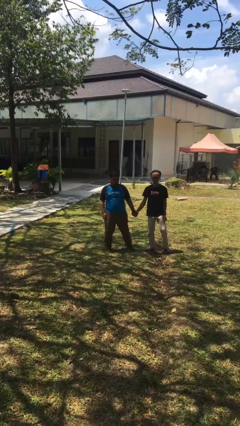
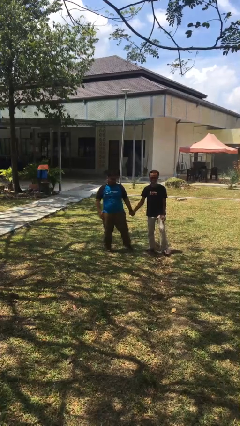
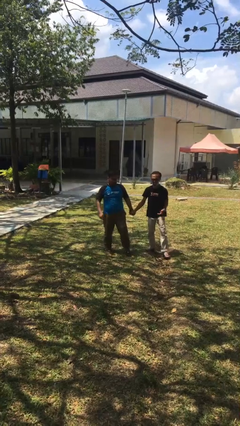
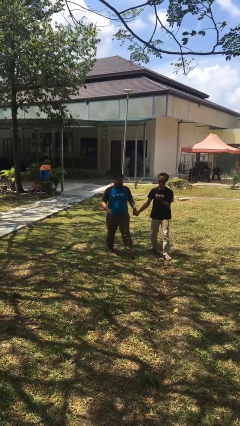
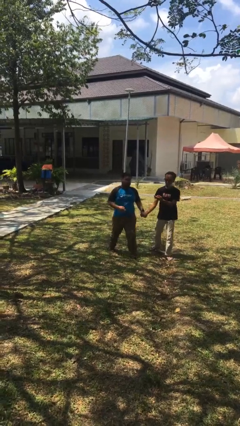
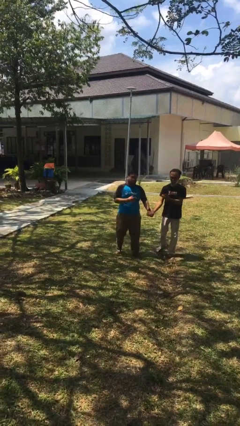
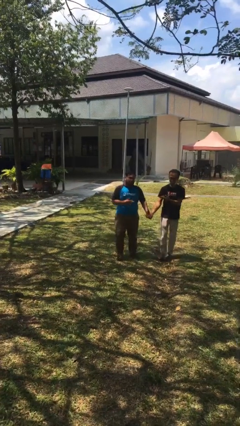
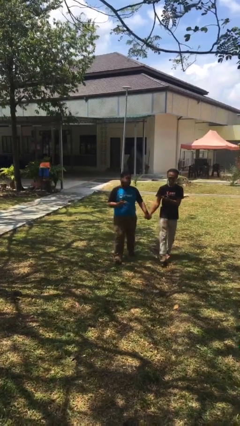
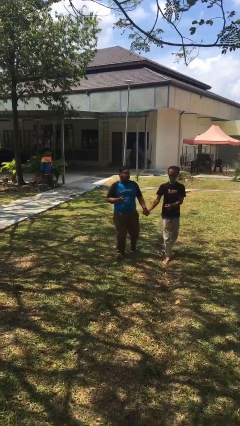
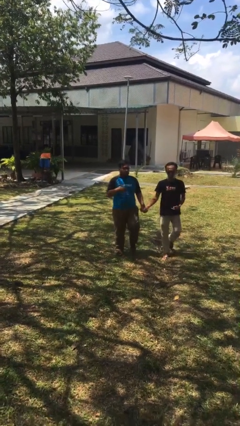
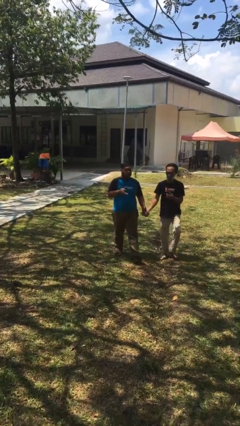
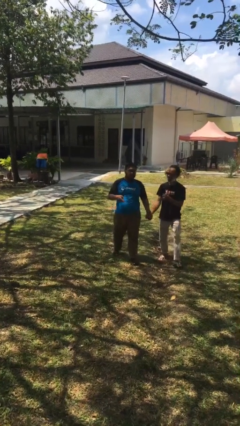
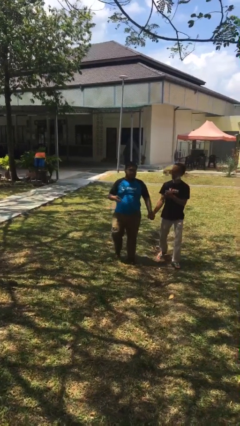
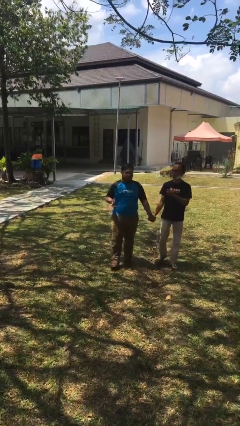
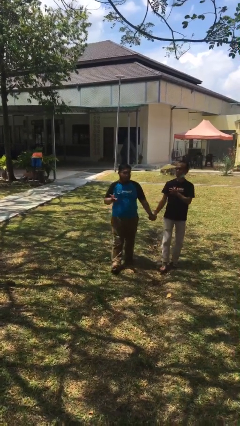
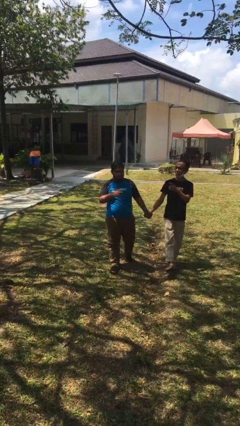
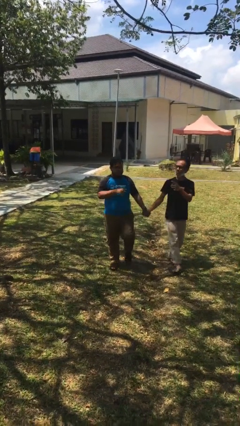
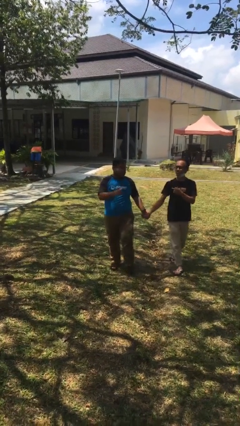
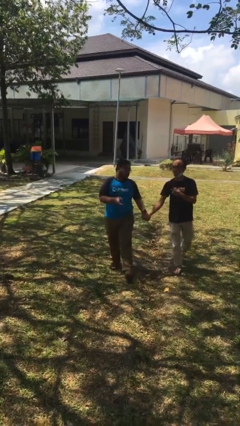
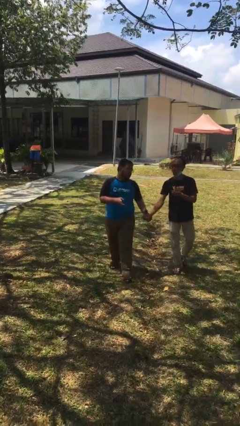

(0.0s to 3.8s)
person holds hand

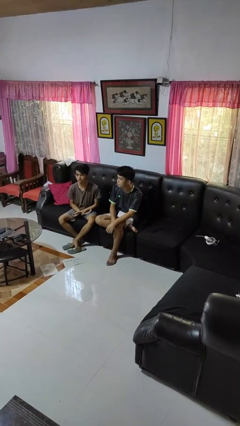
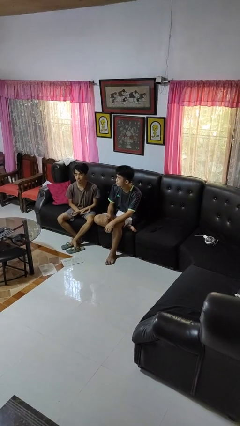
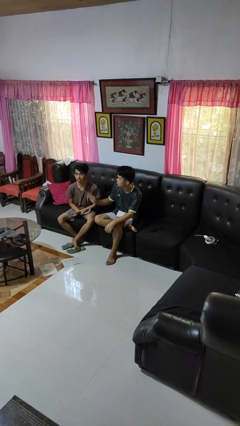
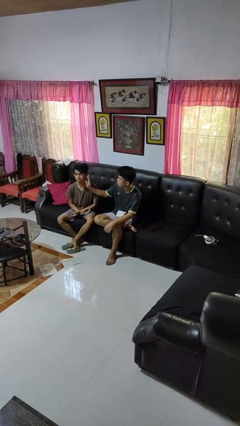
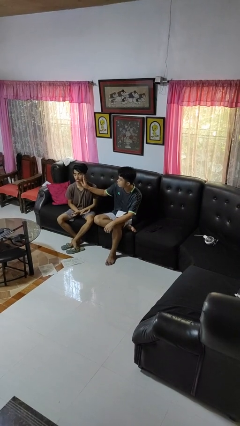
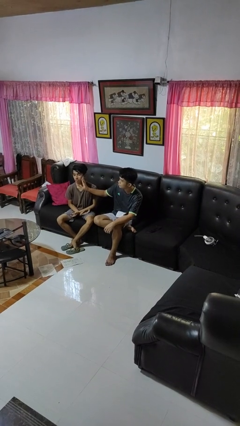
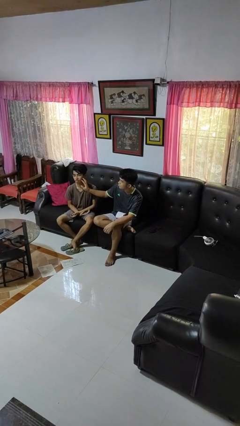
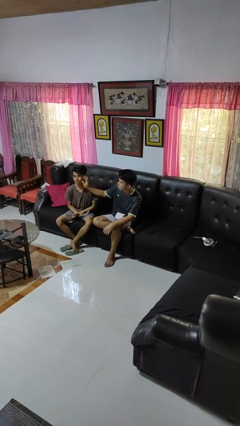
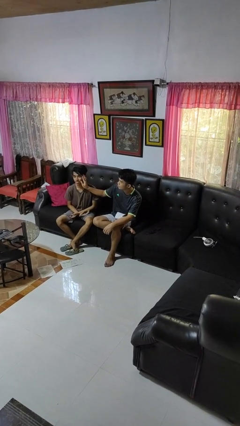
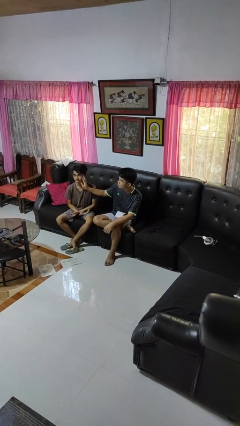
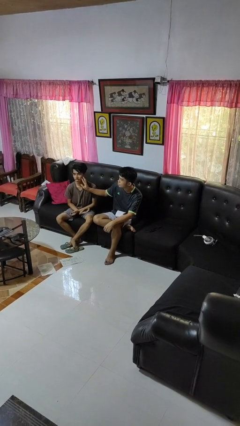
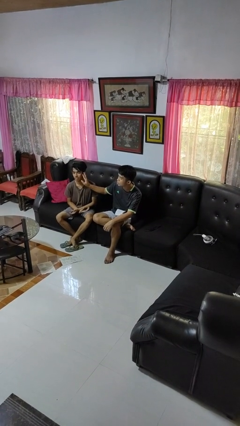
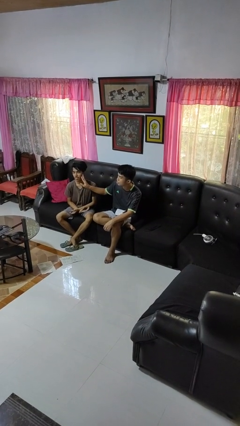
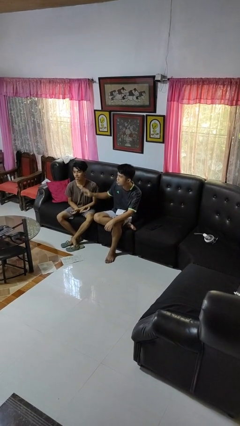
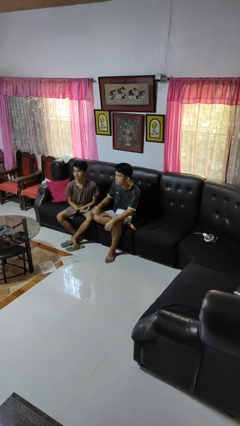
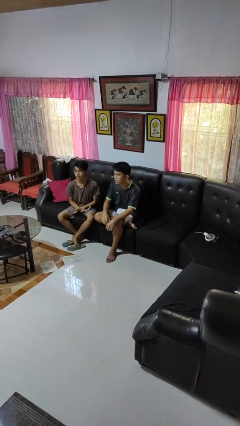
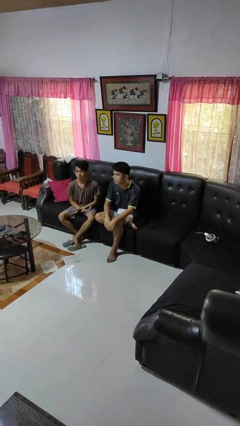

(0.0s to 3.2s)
person touches face of person

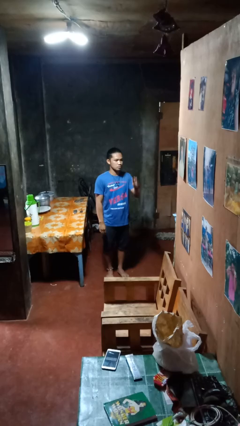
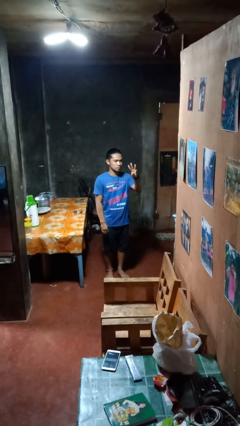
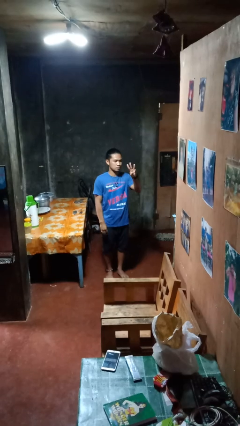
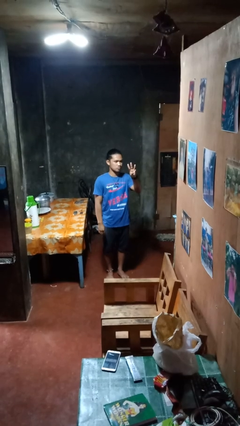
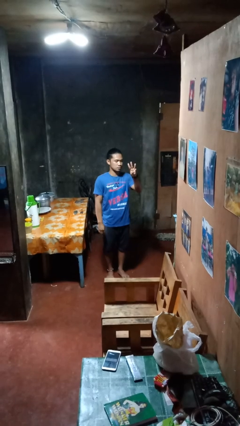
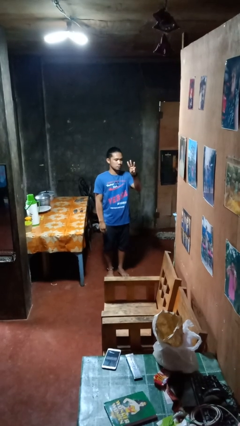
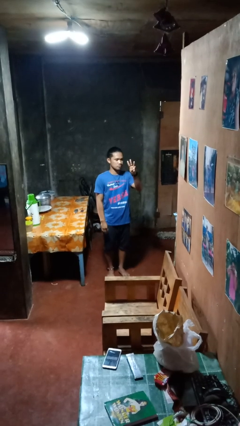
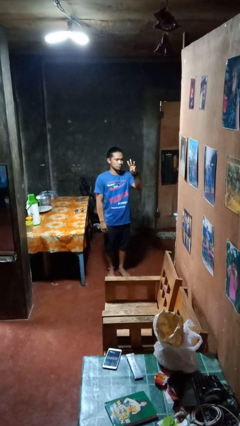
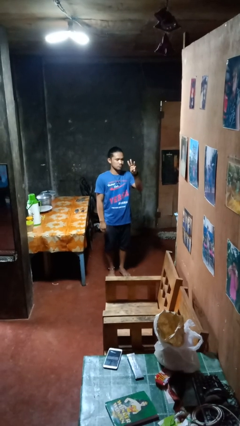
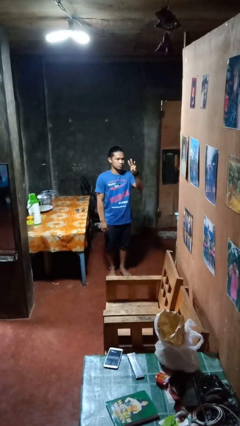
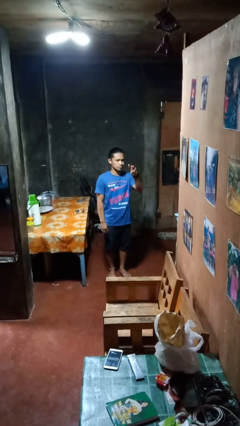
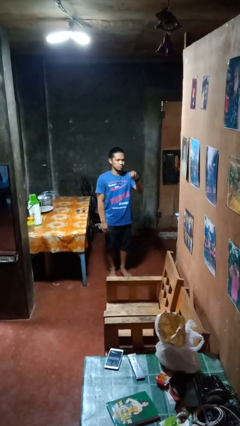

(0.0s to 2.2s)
person gestures number three

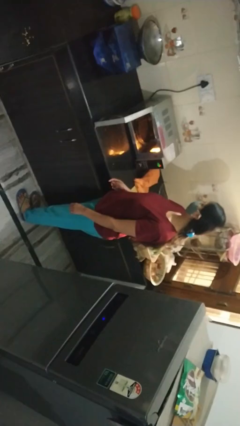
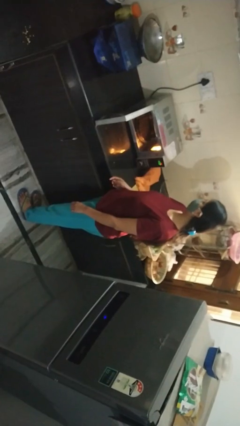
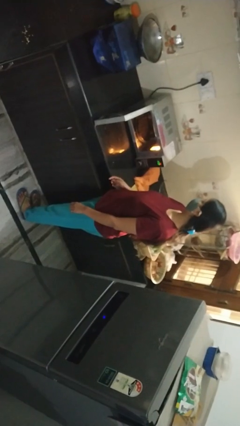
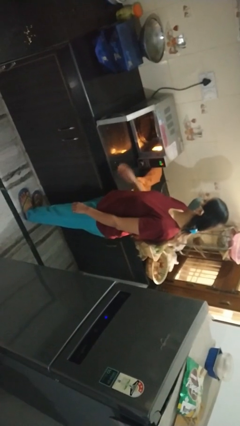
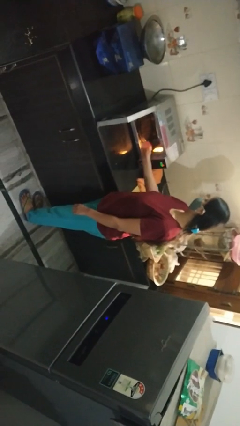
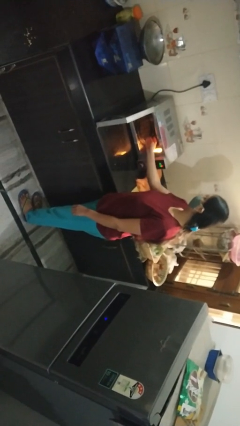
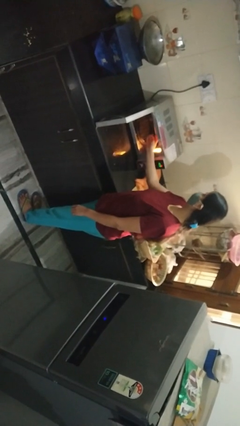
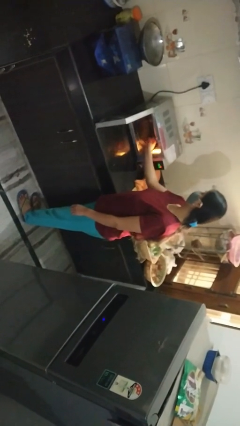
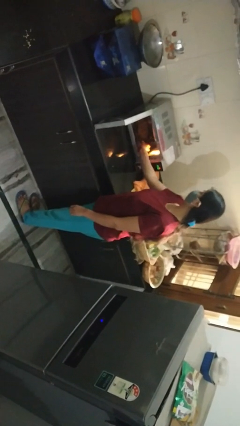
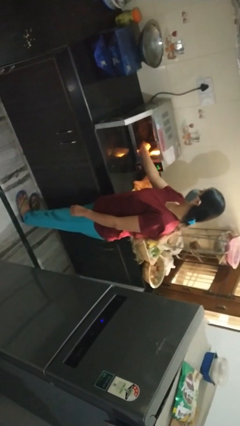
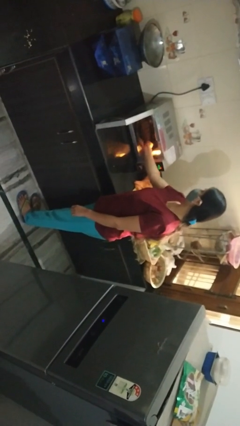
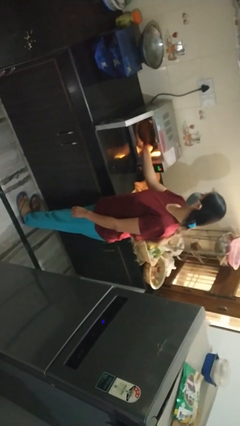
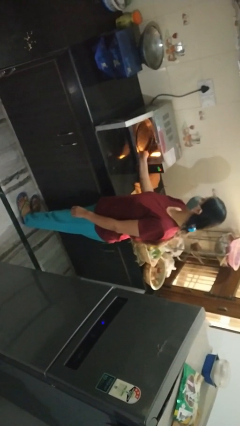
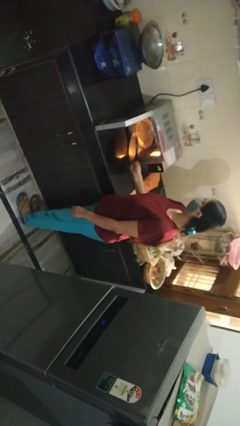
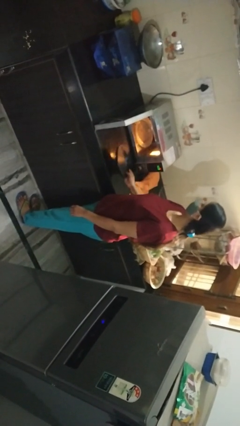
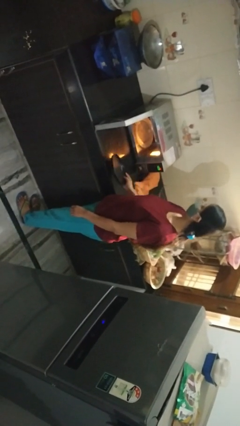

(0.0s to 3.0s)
person takes object from microwave

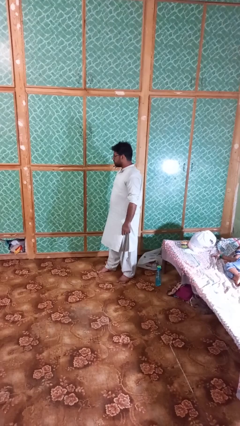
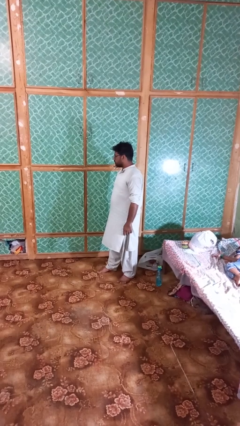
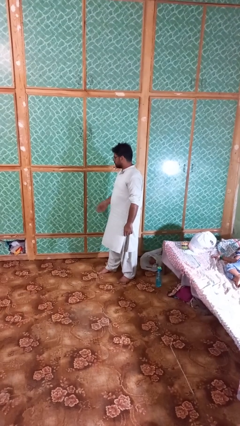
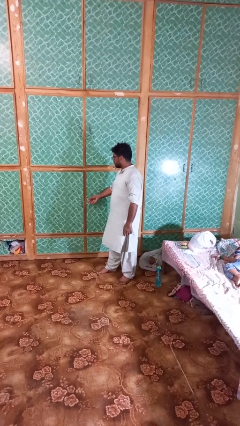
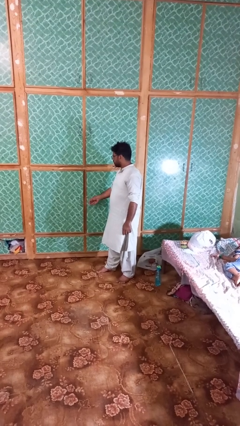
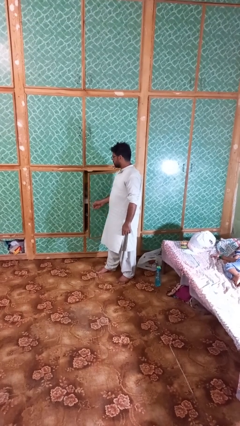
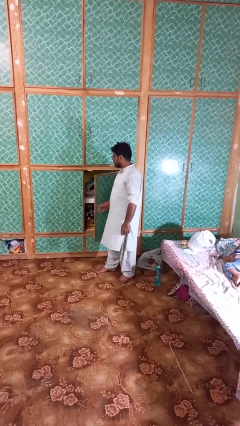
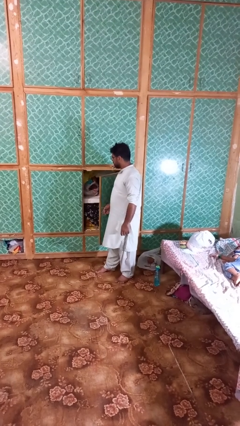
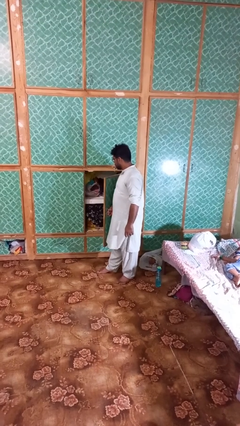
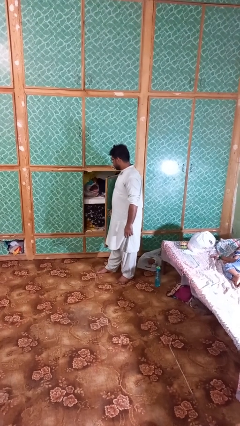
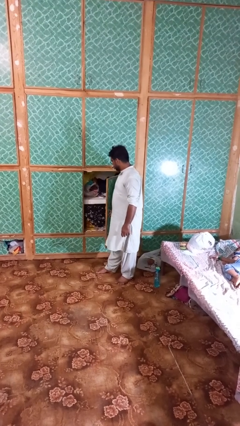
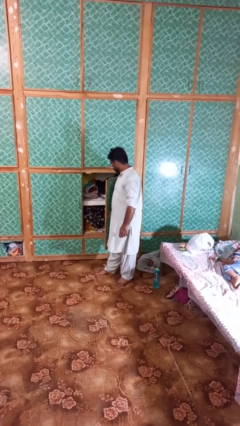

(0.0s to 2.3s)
person opens closet door

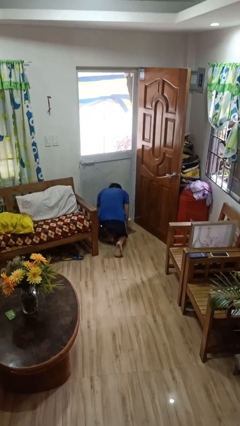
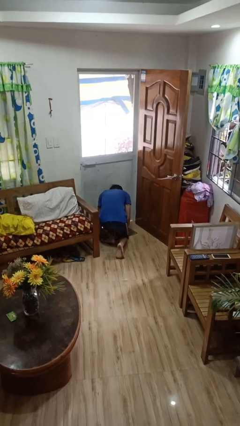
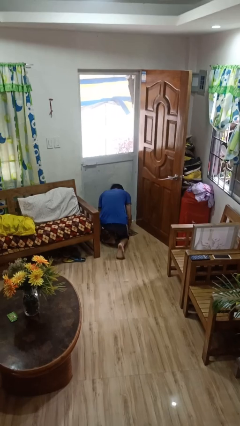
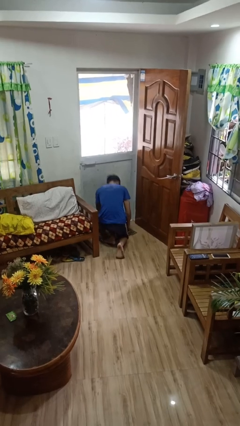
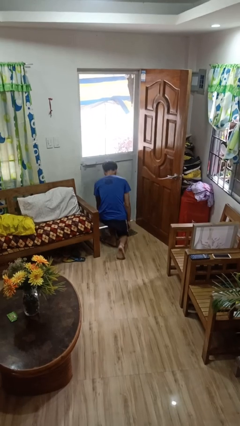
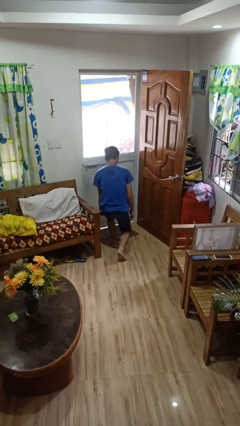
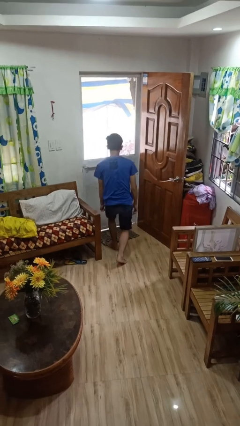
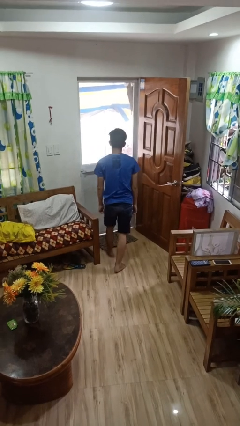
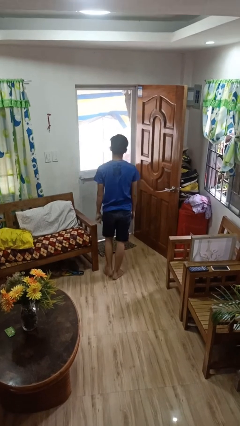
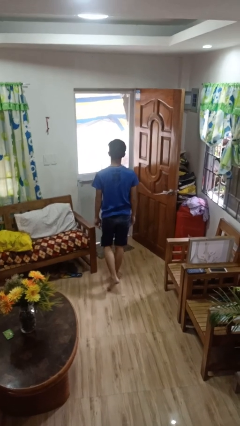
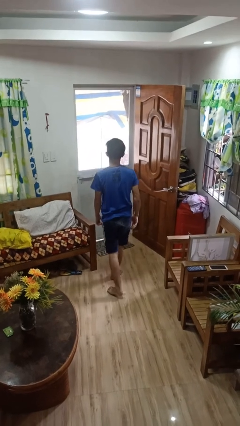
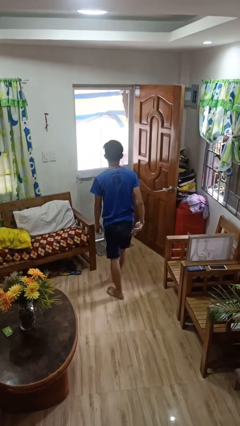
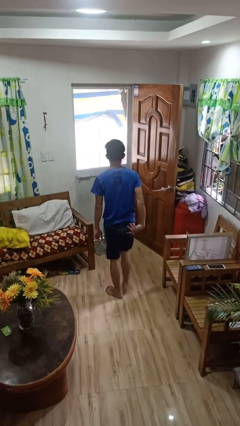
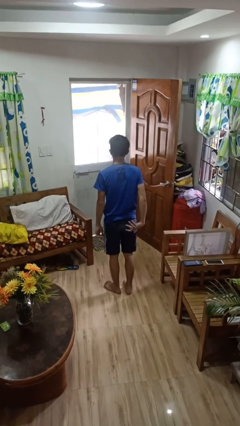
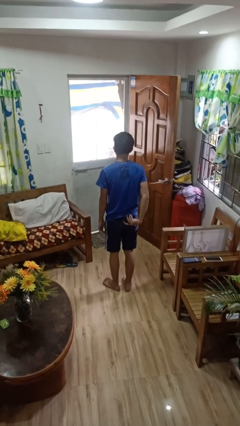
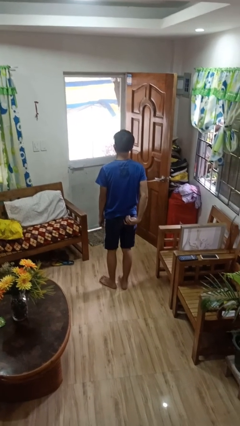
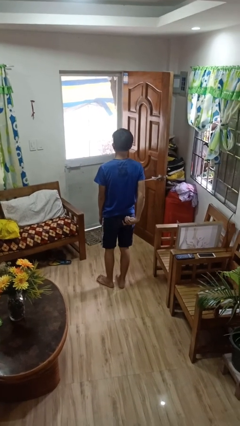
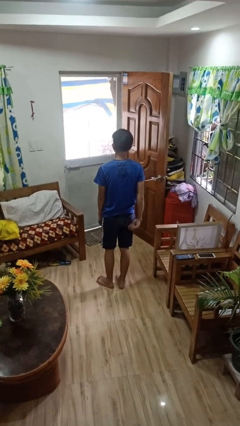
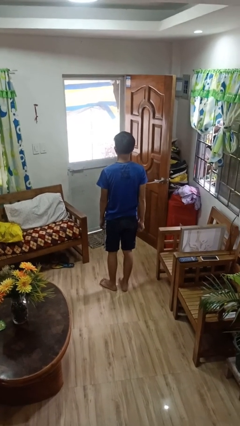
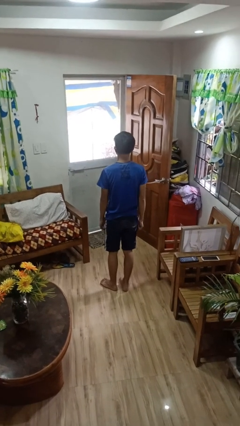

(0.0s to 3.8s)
person stands up from floor
